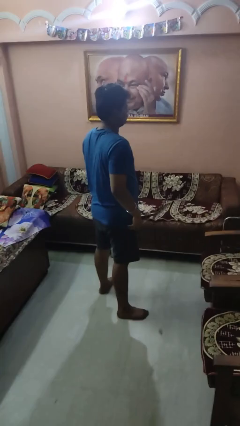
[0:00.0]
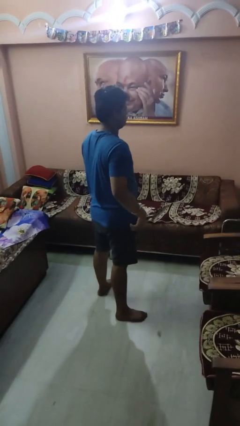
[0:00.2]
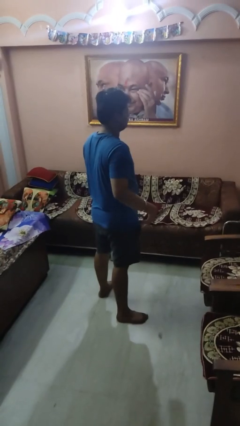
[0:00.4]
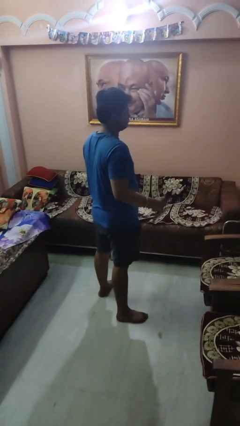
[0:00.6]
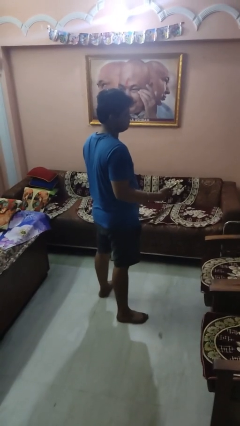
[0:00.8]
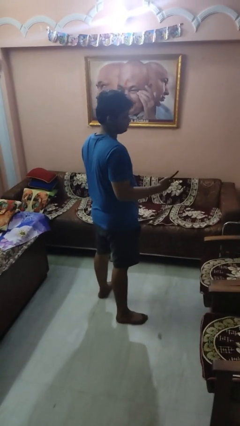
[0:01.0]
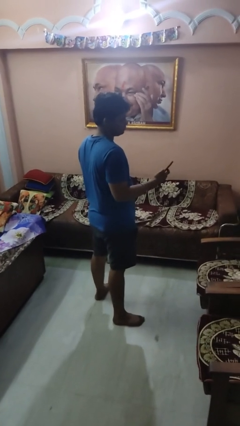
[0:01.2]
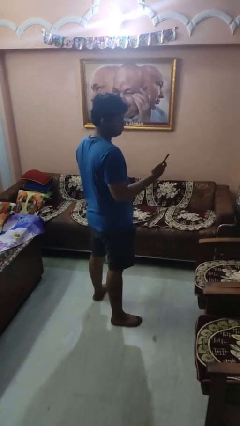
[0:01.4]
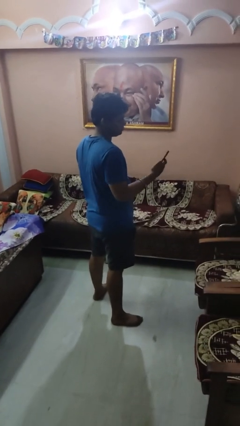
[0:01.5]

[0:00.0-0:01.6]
person takes phone from pocket

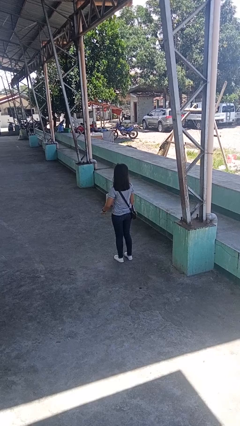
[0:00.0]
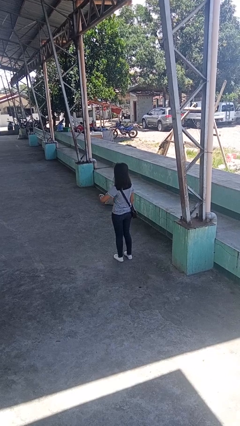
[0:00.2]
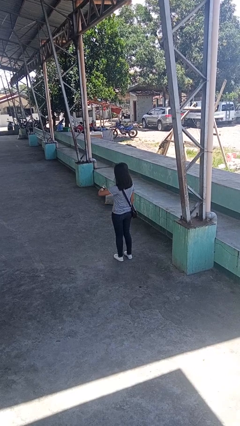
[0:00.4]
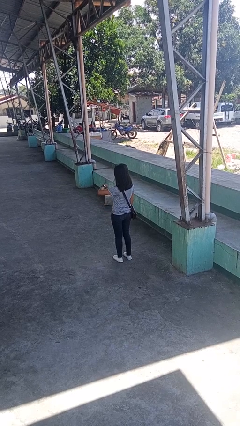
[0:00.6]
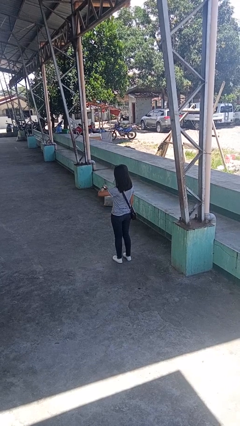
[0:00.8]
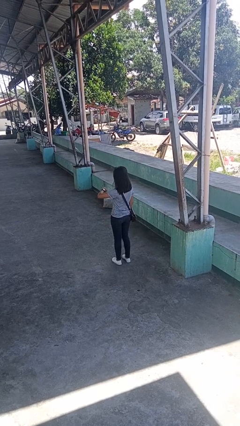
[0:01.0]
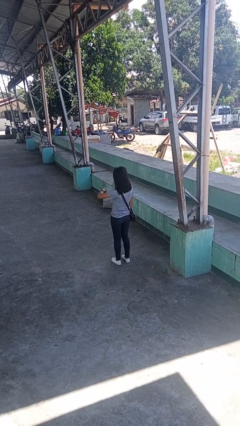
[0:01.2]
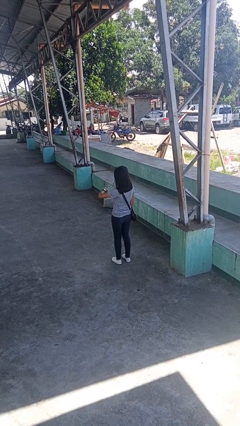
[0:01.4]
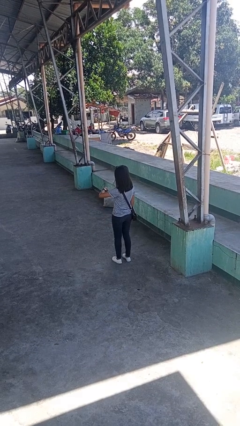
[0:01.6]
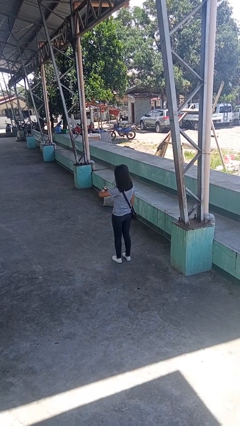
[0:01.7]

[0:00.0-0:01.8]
person looks at wristwatch

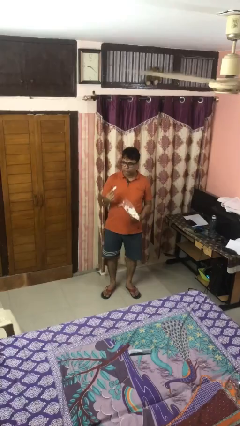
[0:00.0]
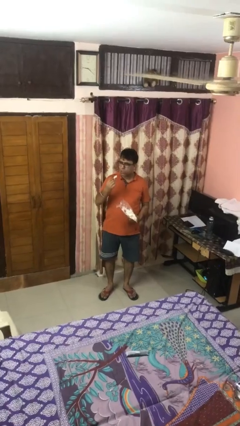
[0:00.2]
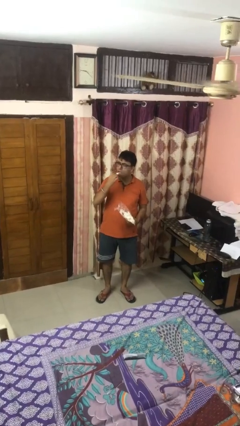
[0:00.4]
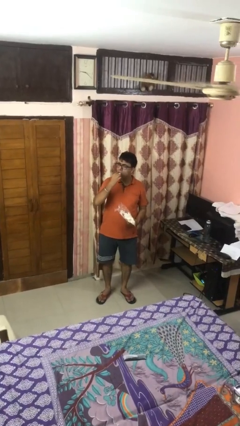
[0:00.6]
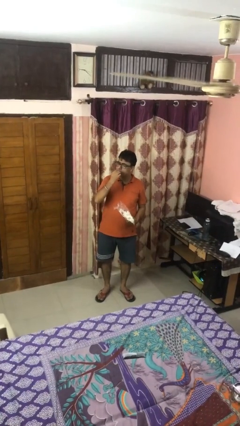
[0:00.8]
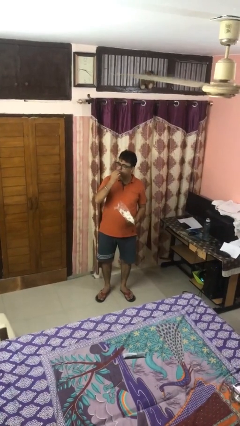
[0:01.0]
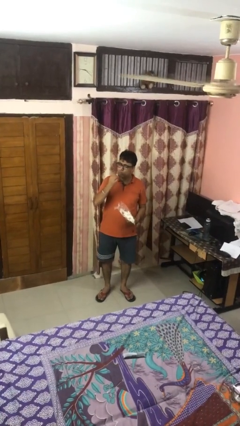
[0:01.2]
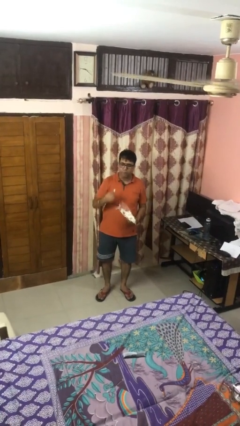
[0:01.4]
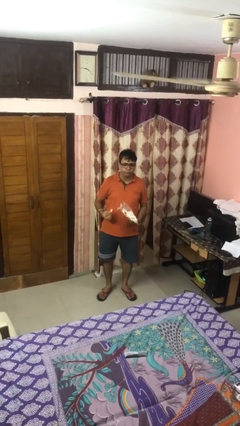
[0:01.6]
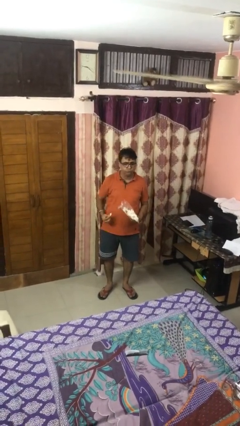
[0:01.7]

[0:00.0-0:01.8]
person eats snack from bag

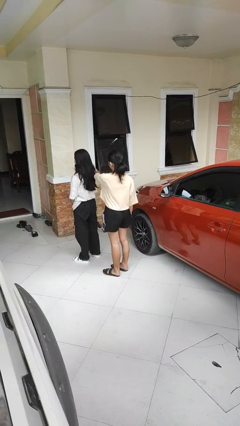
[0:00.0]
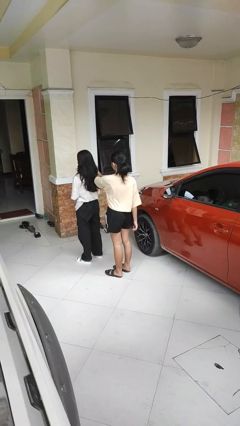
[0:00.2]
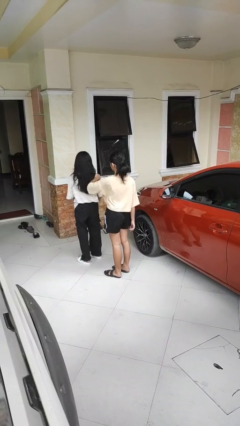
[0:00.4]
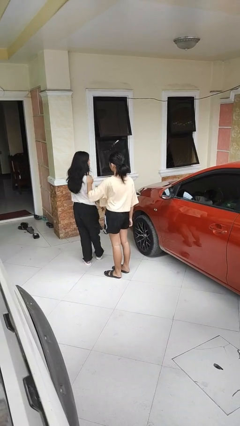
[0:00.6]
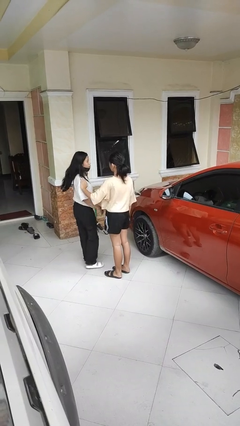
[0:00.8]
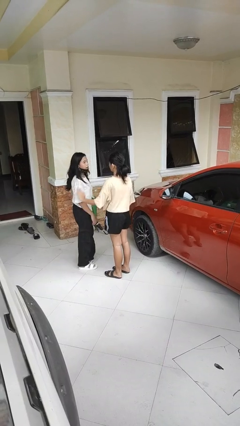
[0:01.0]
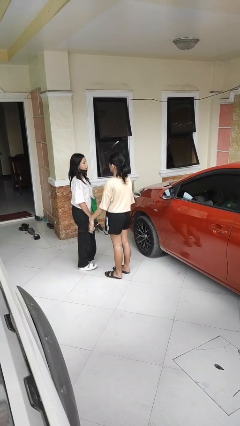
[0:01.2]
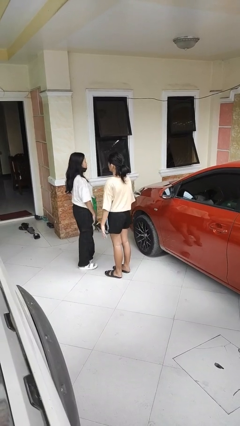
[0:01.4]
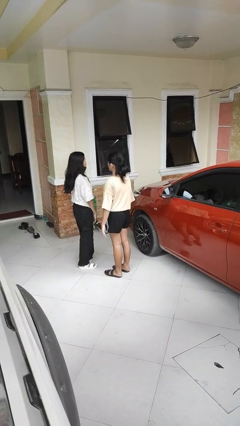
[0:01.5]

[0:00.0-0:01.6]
person spins person around

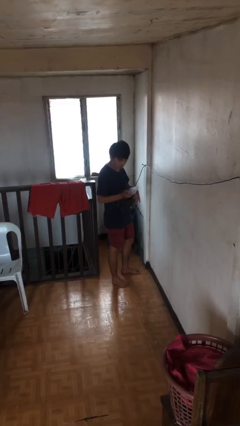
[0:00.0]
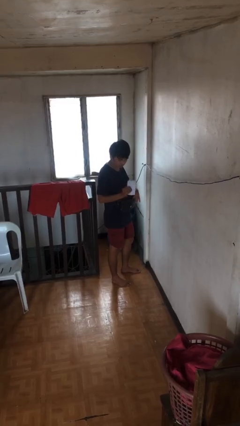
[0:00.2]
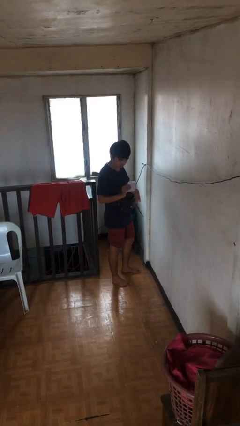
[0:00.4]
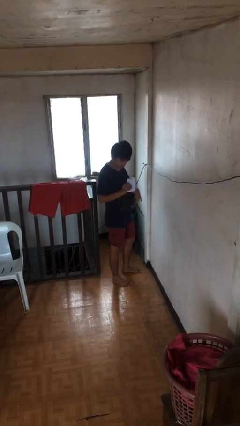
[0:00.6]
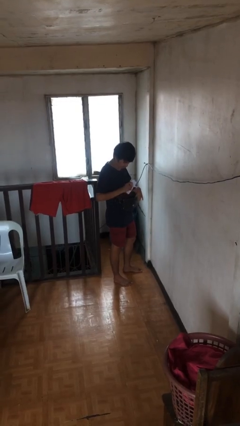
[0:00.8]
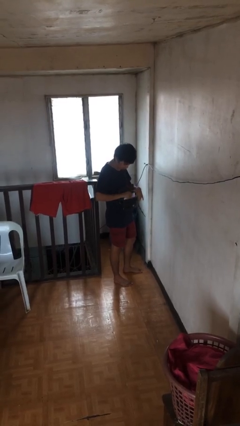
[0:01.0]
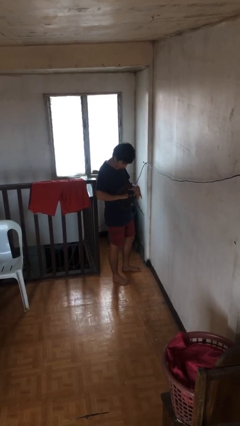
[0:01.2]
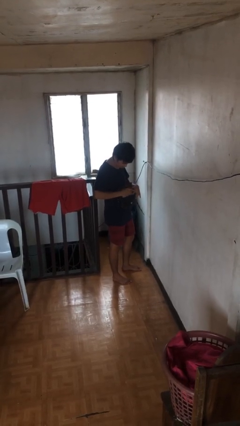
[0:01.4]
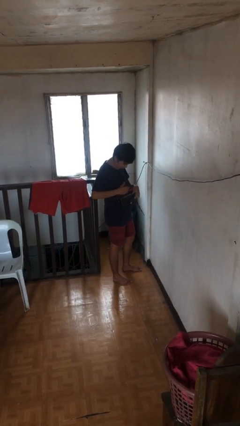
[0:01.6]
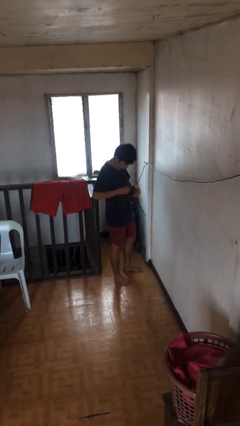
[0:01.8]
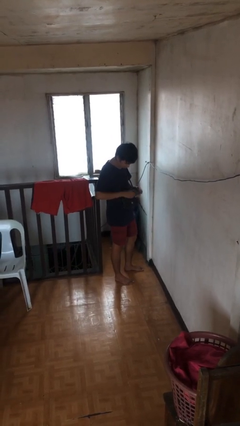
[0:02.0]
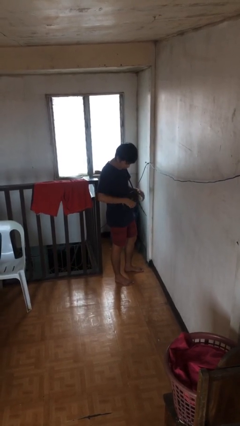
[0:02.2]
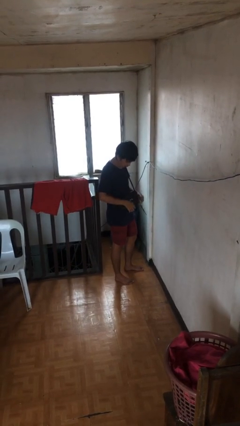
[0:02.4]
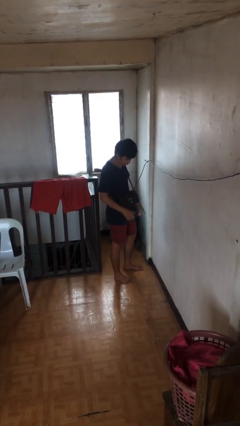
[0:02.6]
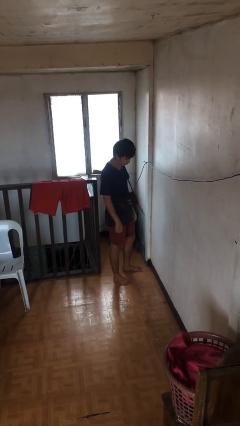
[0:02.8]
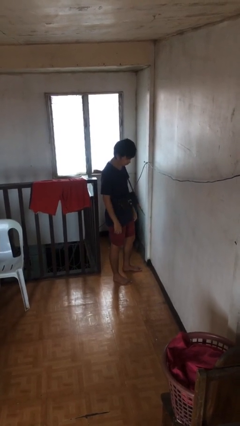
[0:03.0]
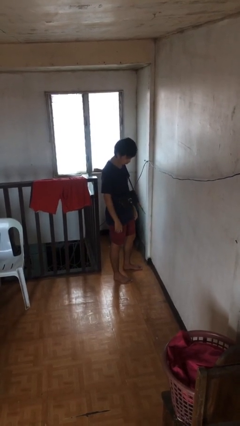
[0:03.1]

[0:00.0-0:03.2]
person puts object into purse

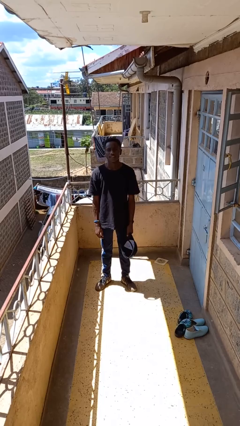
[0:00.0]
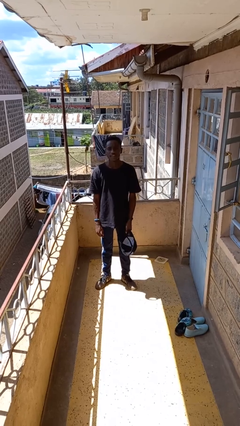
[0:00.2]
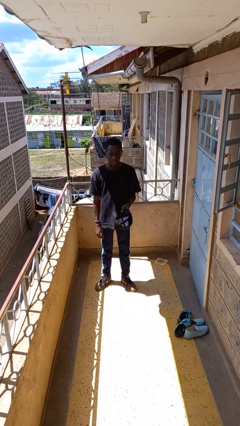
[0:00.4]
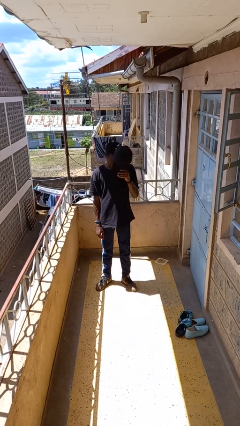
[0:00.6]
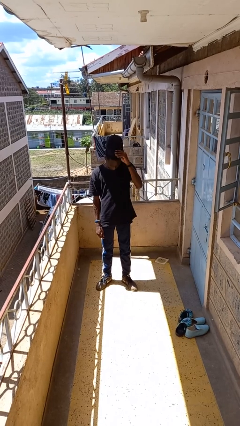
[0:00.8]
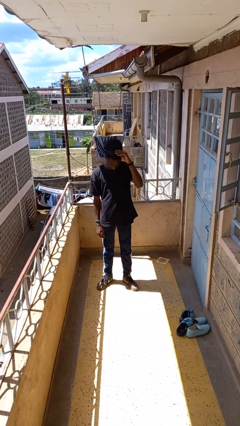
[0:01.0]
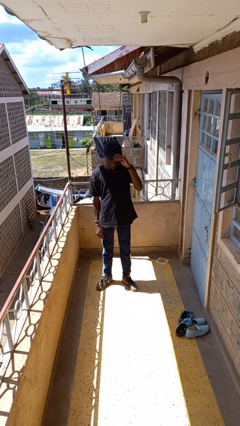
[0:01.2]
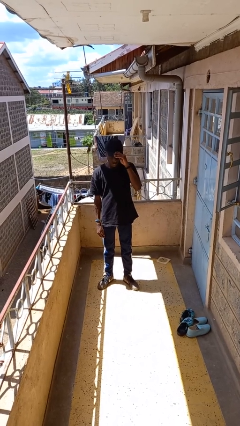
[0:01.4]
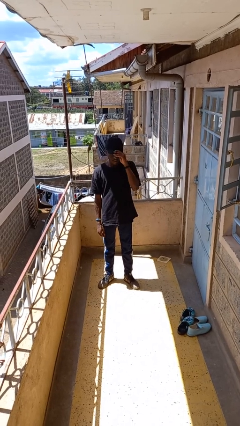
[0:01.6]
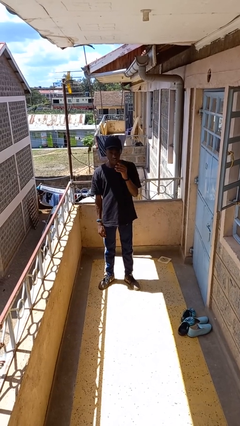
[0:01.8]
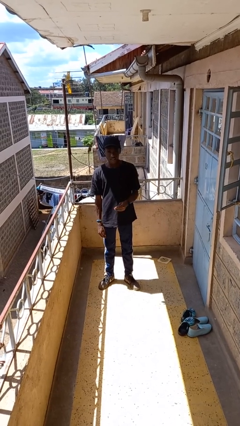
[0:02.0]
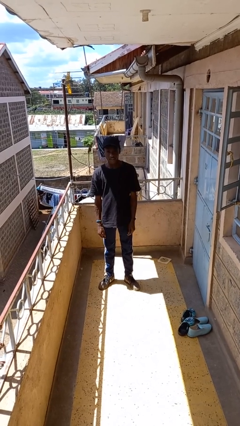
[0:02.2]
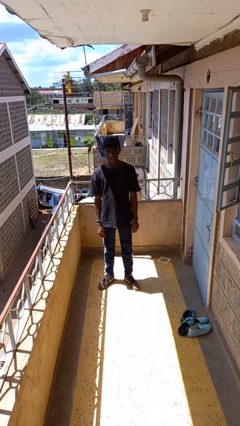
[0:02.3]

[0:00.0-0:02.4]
person puts on hat

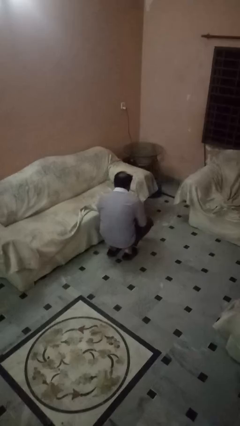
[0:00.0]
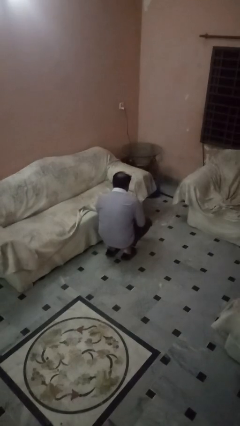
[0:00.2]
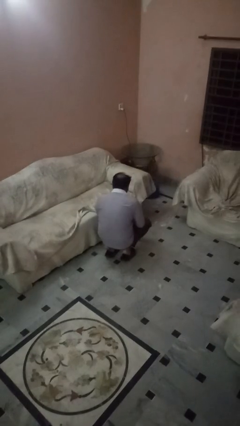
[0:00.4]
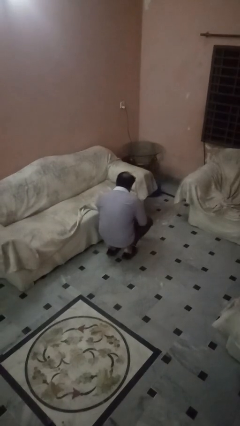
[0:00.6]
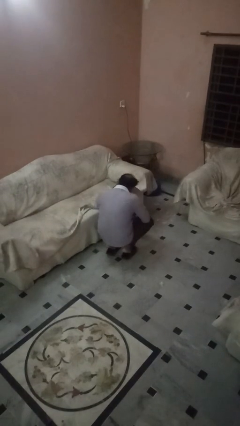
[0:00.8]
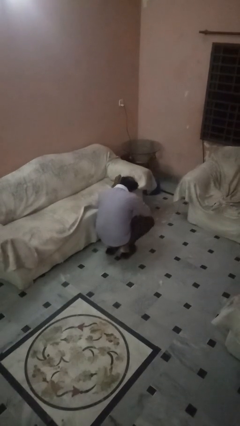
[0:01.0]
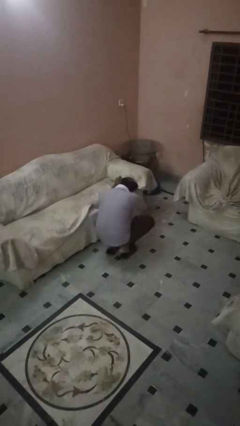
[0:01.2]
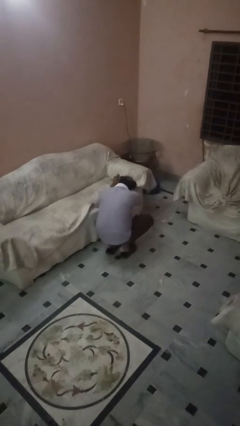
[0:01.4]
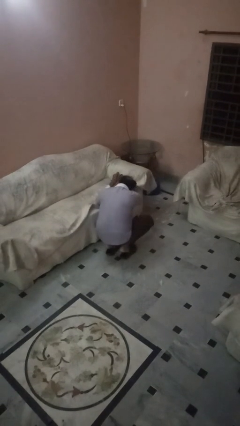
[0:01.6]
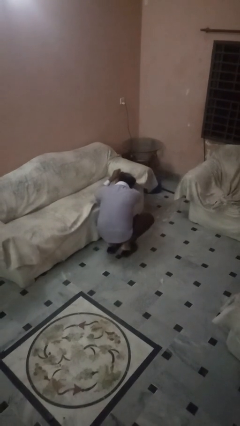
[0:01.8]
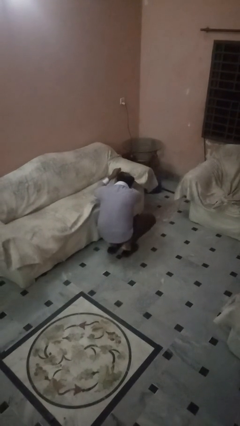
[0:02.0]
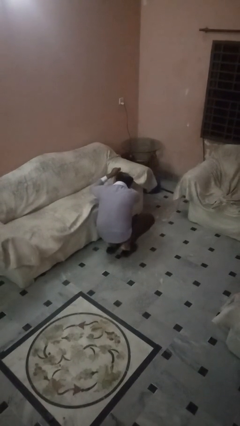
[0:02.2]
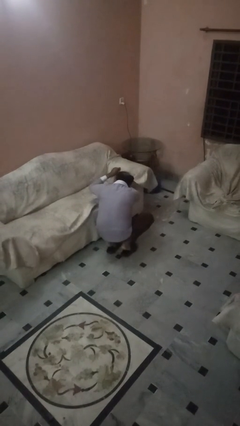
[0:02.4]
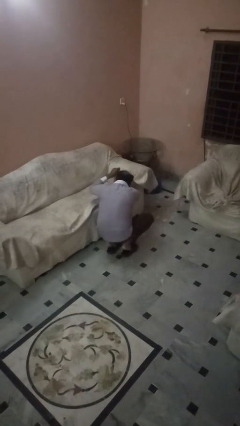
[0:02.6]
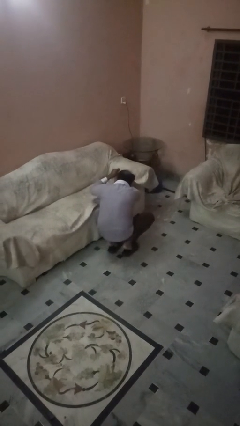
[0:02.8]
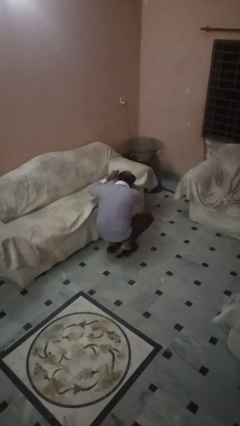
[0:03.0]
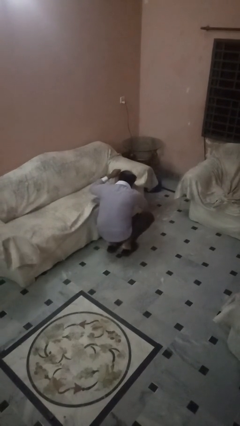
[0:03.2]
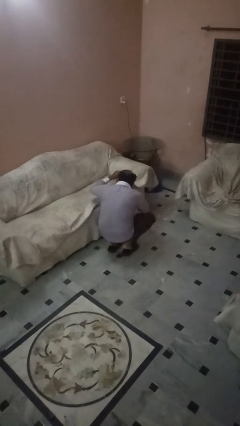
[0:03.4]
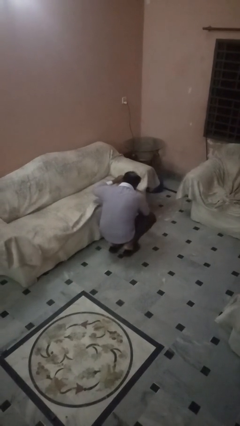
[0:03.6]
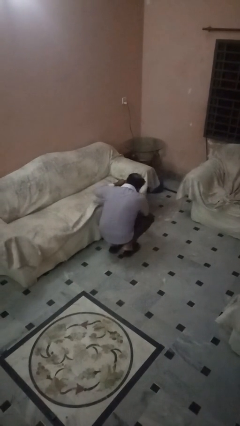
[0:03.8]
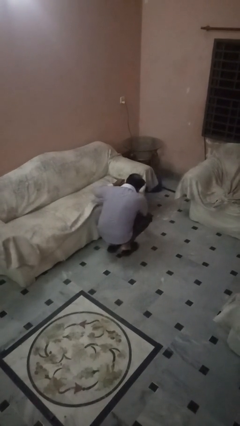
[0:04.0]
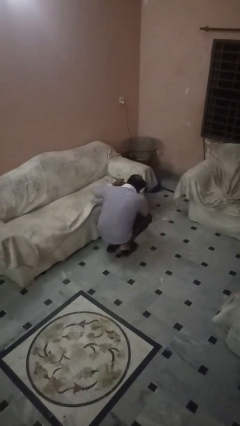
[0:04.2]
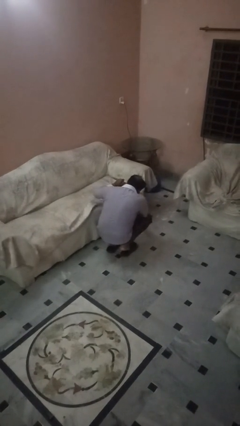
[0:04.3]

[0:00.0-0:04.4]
person searches in couch

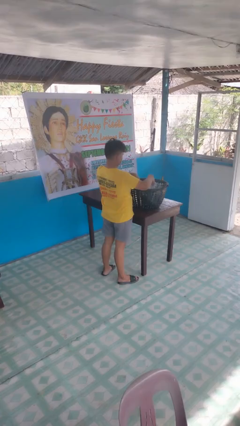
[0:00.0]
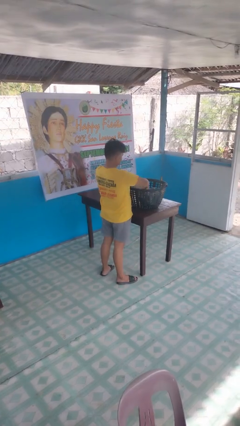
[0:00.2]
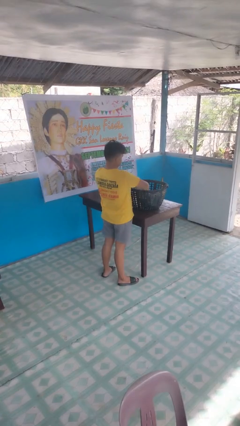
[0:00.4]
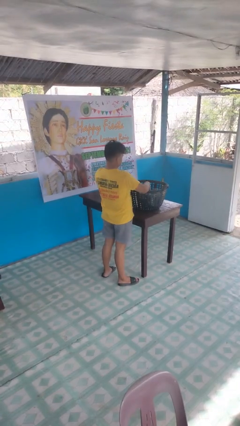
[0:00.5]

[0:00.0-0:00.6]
person puts object into basket
